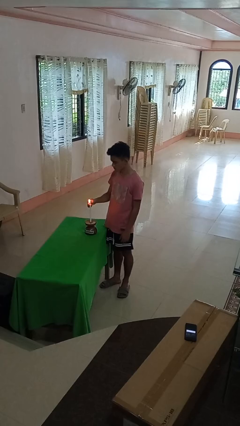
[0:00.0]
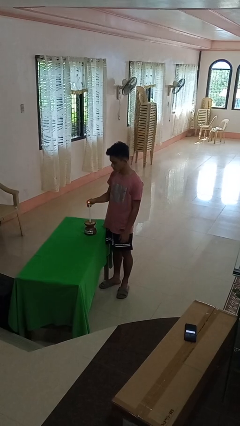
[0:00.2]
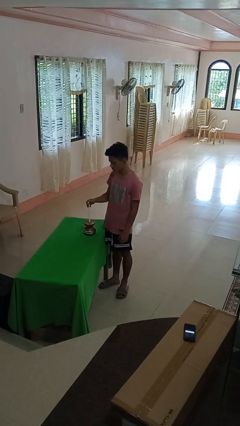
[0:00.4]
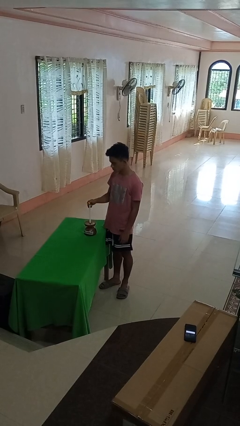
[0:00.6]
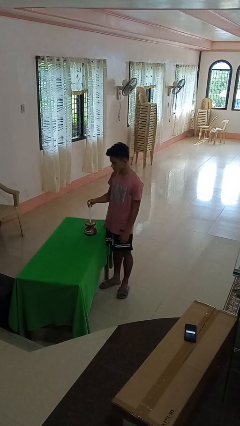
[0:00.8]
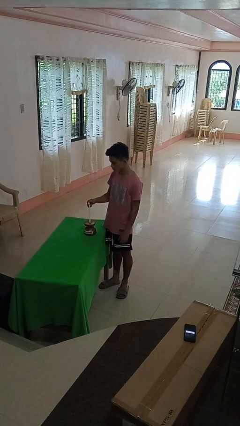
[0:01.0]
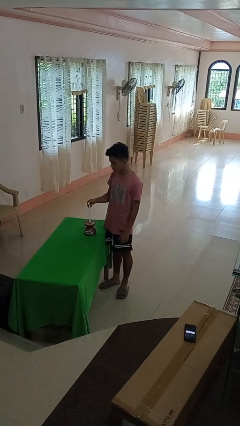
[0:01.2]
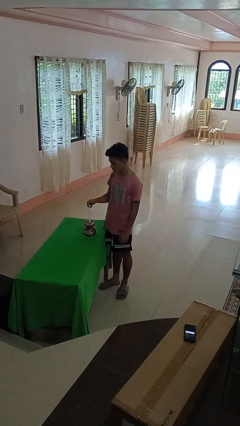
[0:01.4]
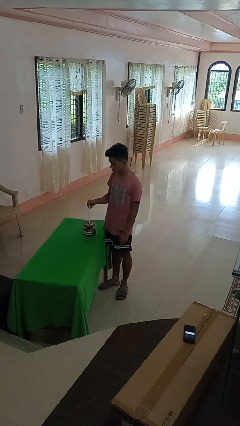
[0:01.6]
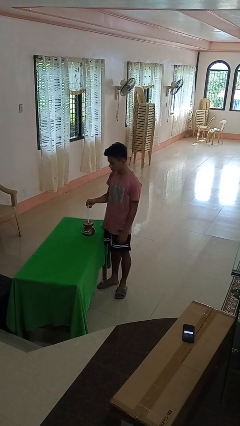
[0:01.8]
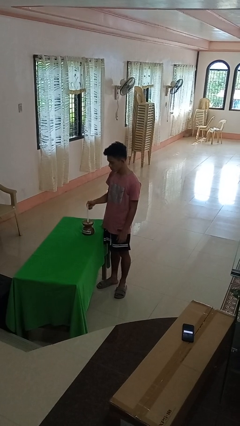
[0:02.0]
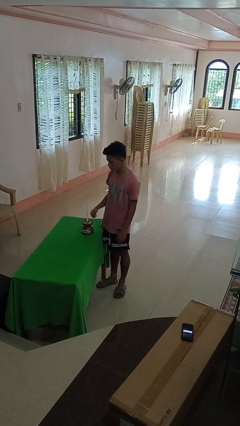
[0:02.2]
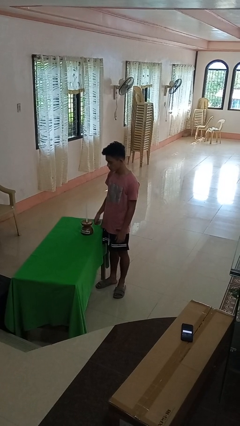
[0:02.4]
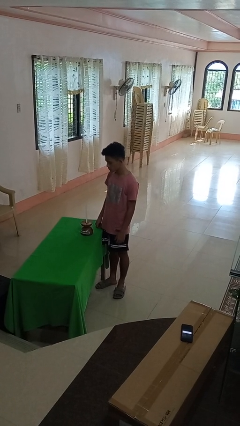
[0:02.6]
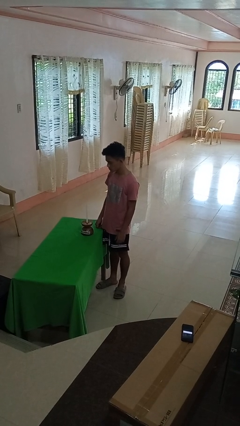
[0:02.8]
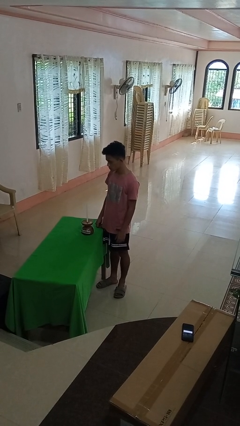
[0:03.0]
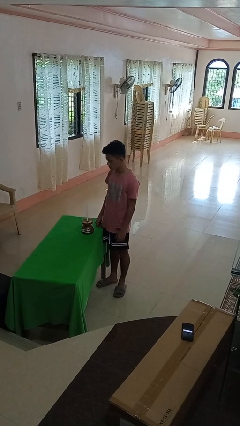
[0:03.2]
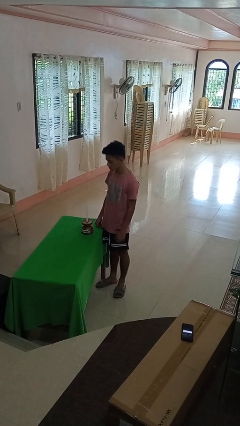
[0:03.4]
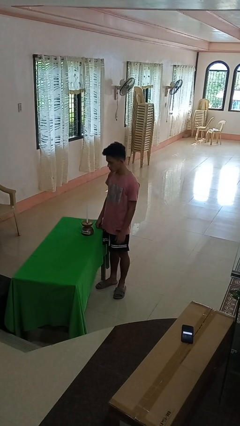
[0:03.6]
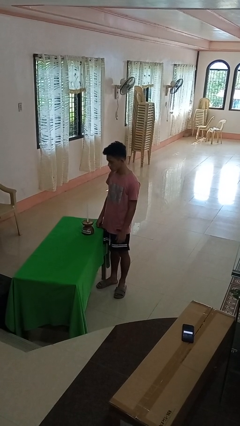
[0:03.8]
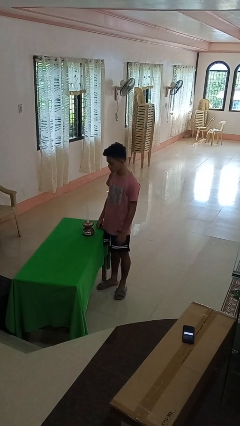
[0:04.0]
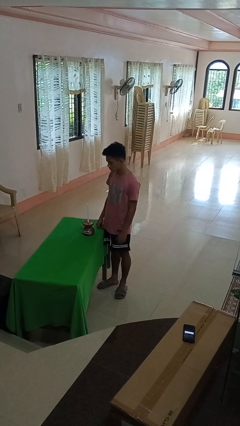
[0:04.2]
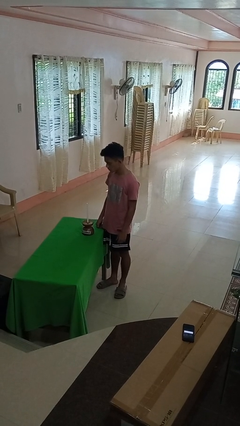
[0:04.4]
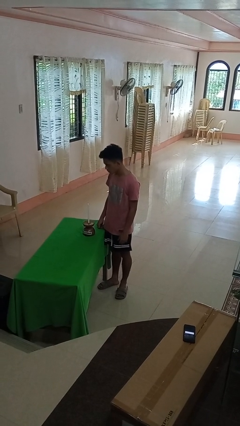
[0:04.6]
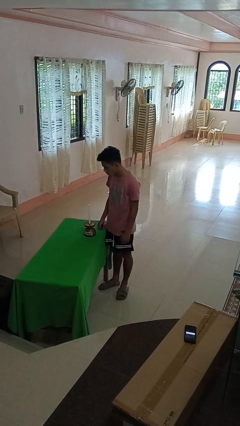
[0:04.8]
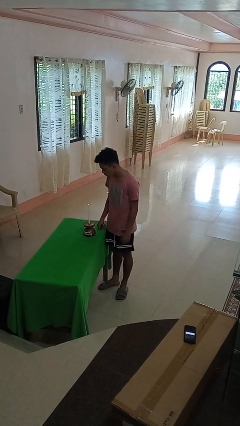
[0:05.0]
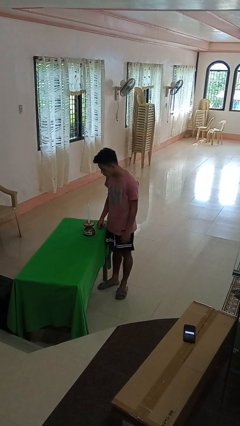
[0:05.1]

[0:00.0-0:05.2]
person lights candle

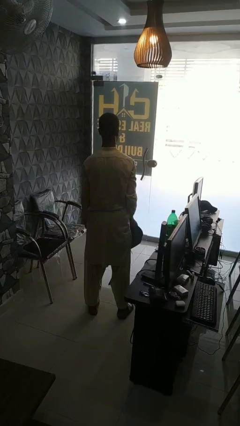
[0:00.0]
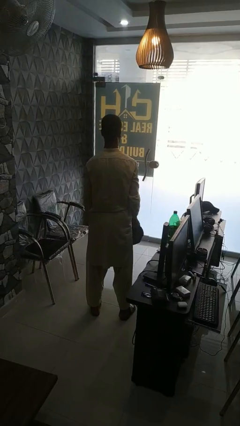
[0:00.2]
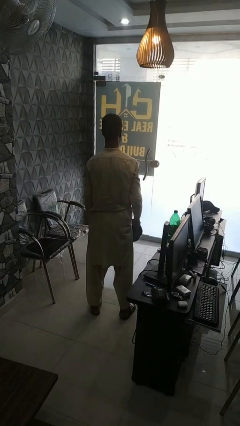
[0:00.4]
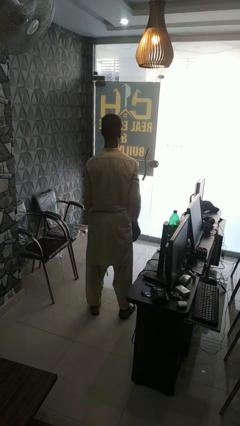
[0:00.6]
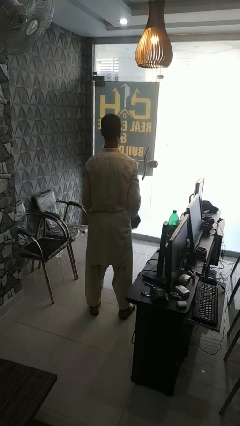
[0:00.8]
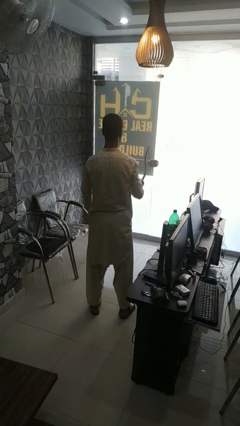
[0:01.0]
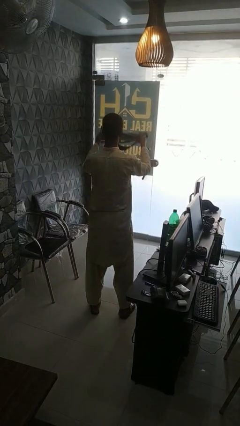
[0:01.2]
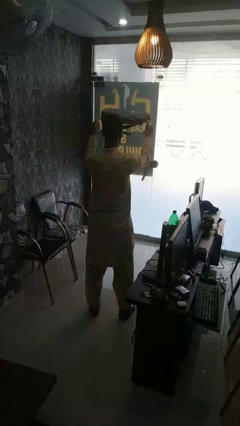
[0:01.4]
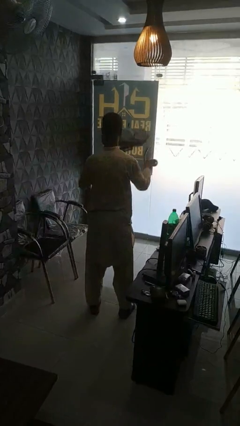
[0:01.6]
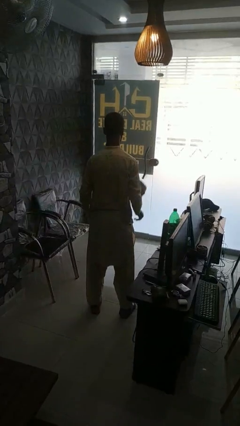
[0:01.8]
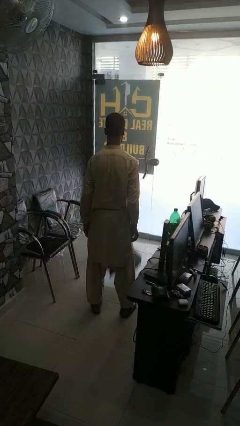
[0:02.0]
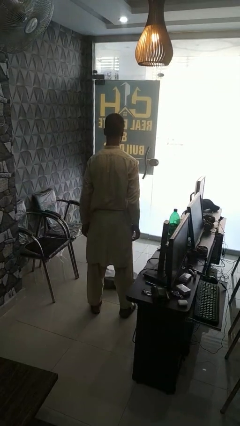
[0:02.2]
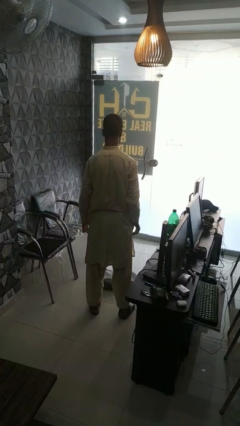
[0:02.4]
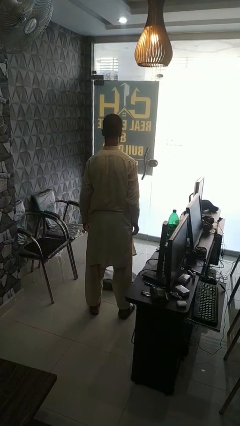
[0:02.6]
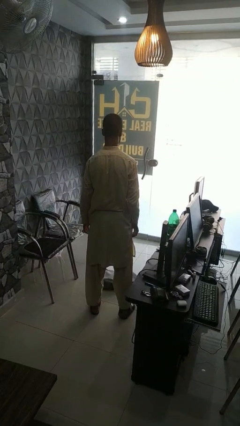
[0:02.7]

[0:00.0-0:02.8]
person throws object into air

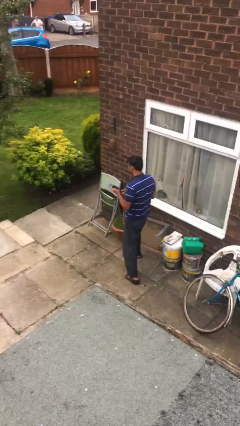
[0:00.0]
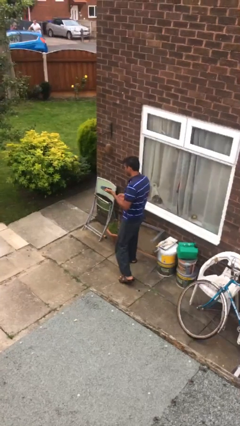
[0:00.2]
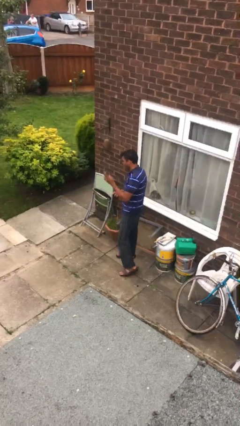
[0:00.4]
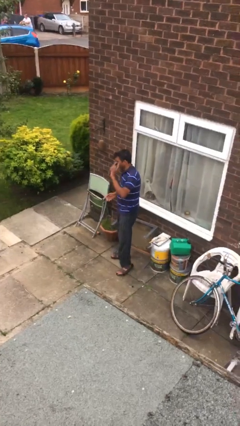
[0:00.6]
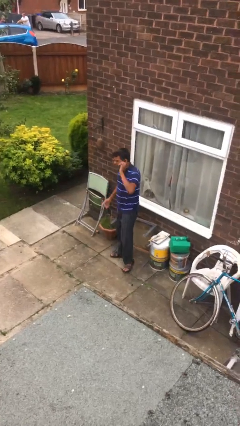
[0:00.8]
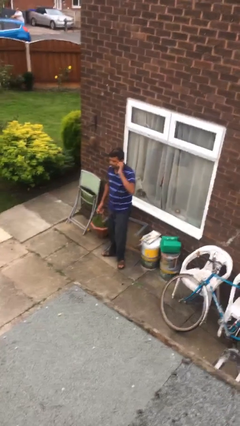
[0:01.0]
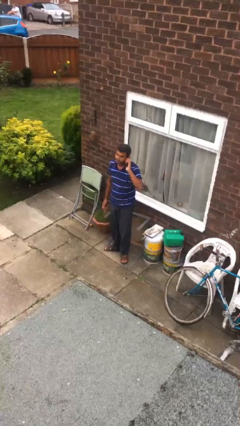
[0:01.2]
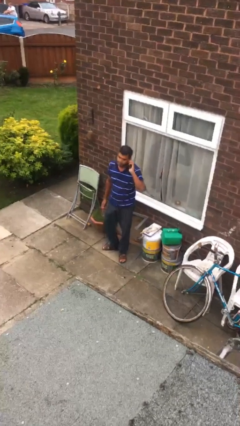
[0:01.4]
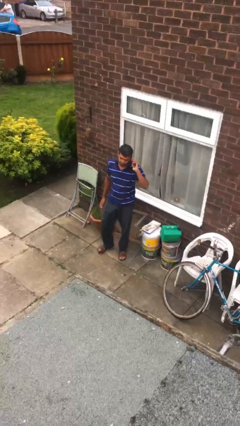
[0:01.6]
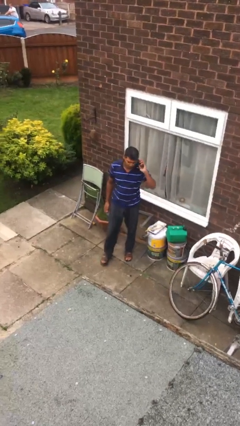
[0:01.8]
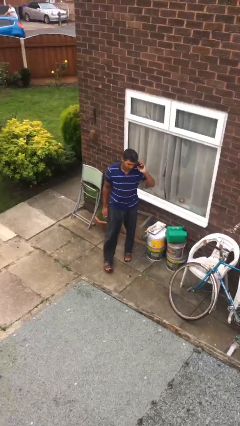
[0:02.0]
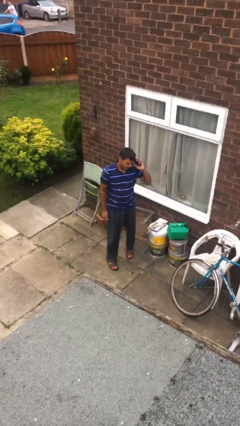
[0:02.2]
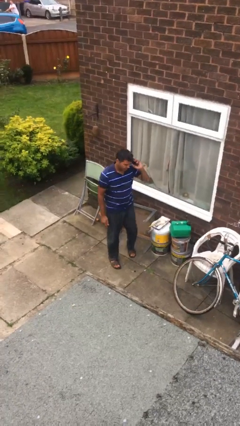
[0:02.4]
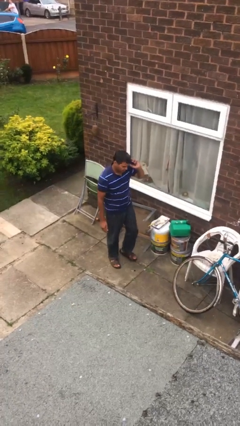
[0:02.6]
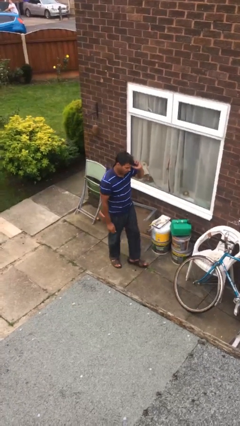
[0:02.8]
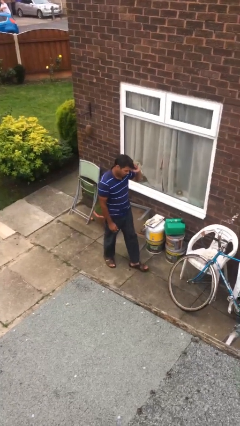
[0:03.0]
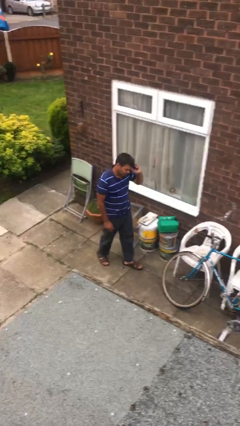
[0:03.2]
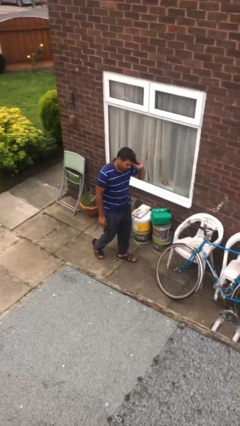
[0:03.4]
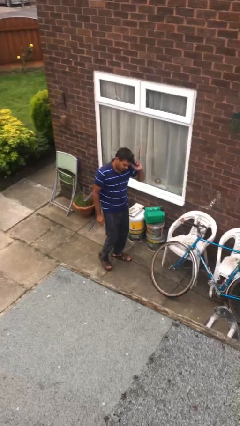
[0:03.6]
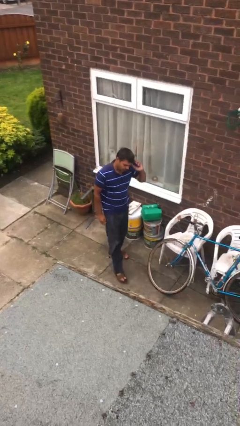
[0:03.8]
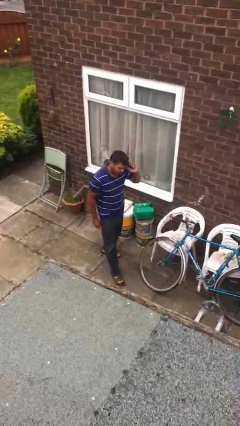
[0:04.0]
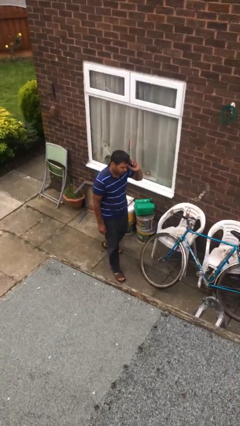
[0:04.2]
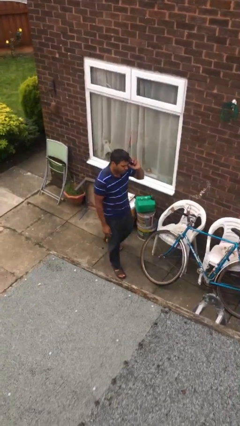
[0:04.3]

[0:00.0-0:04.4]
person talks on phone

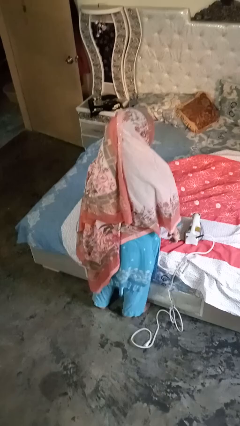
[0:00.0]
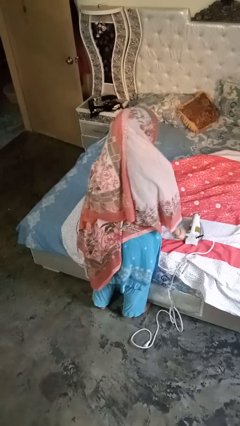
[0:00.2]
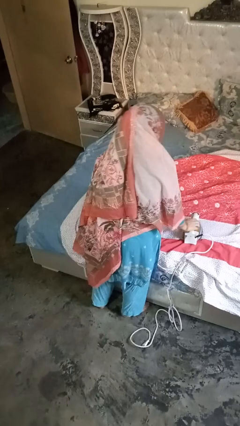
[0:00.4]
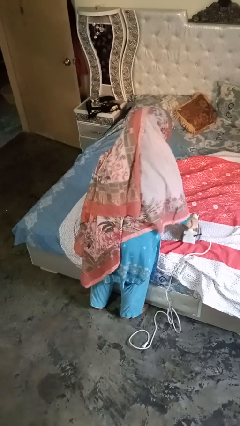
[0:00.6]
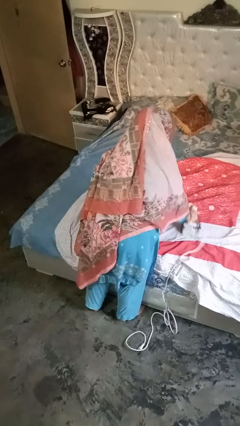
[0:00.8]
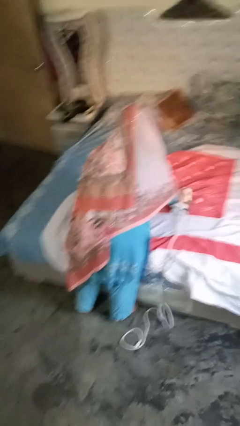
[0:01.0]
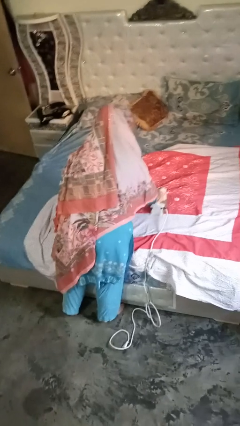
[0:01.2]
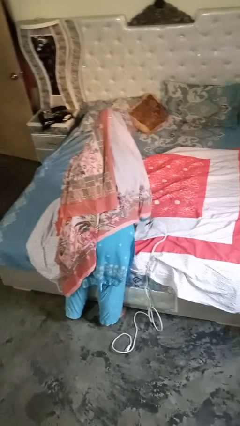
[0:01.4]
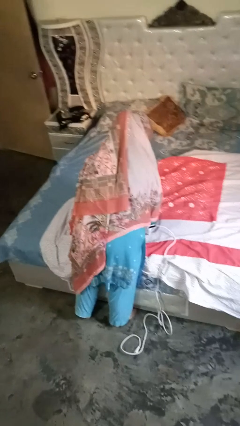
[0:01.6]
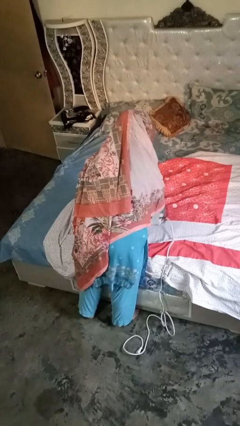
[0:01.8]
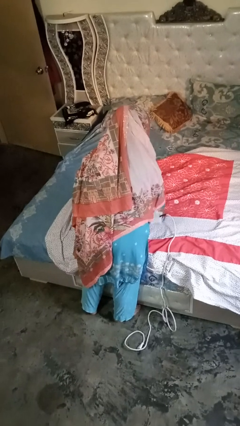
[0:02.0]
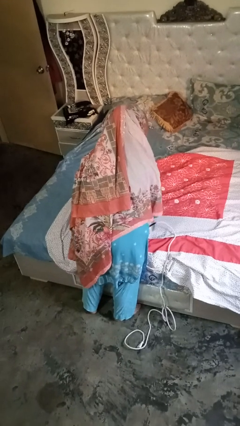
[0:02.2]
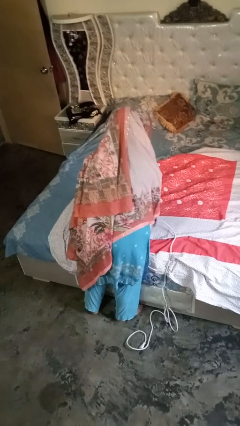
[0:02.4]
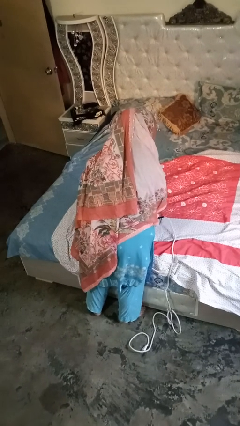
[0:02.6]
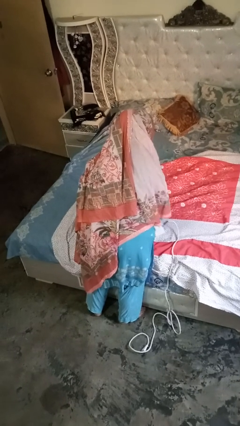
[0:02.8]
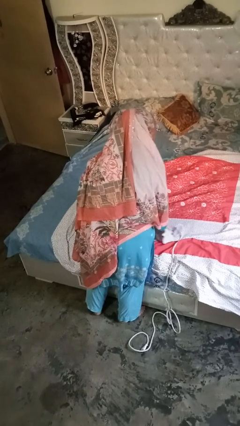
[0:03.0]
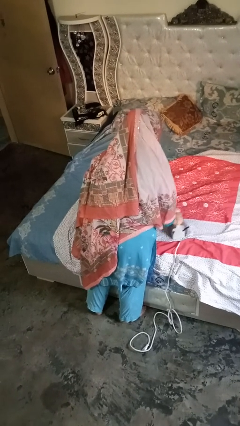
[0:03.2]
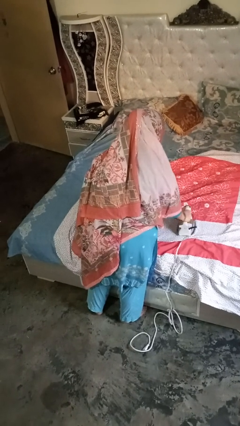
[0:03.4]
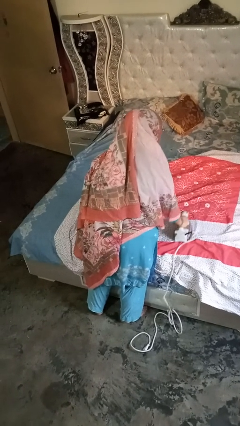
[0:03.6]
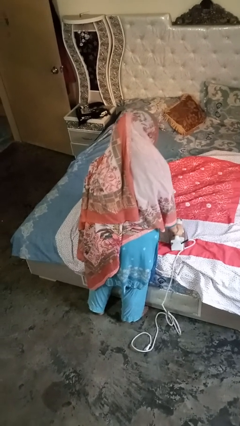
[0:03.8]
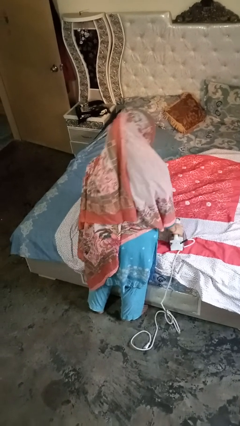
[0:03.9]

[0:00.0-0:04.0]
person irons clothes

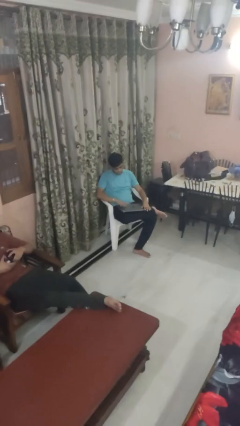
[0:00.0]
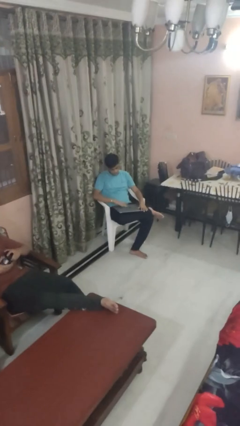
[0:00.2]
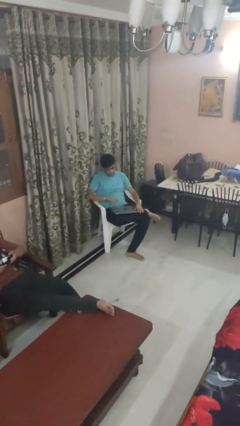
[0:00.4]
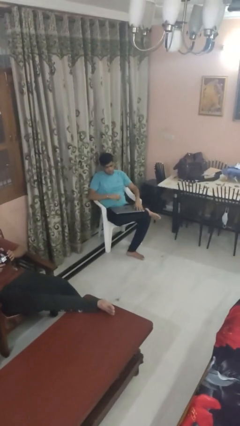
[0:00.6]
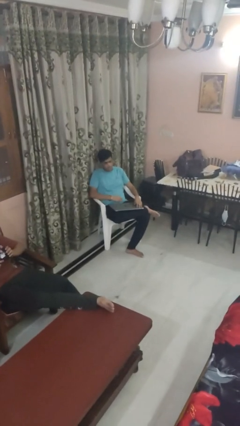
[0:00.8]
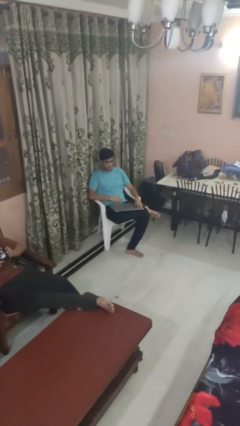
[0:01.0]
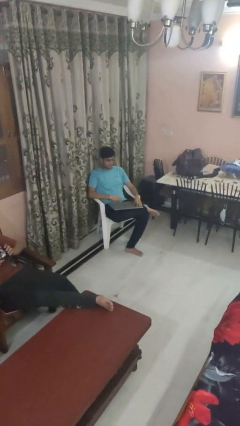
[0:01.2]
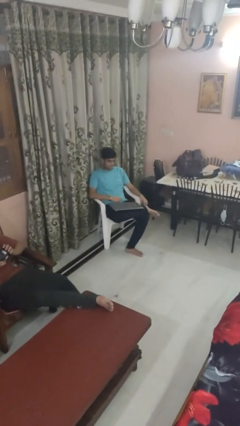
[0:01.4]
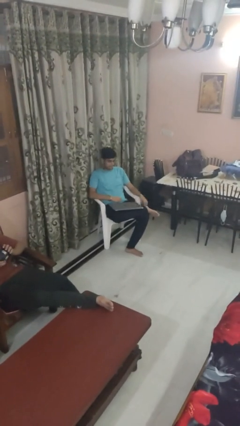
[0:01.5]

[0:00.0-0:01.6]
person waves hand over object
